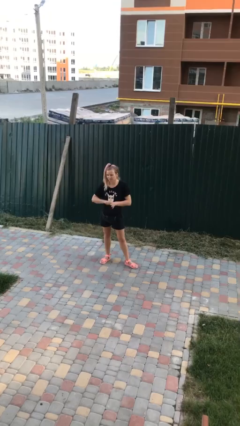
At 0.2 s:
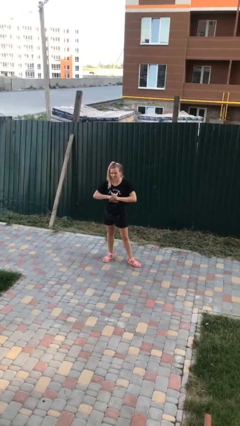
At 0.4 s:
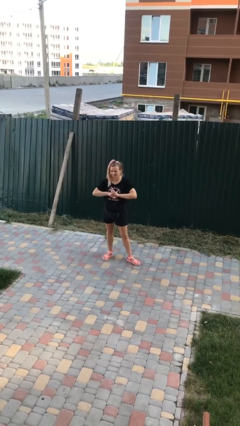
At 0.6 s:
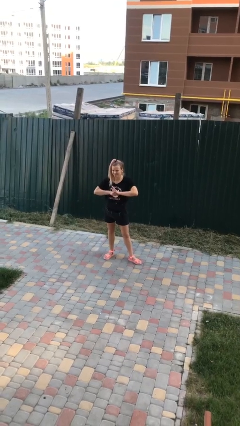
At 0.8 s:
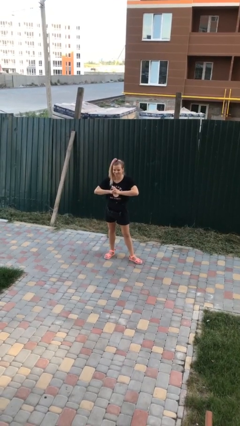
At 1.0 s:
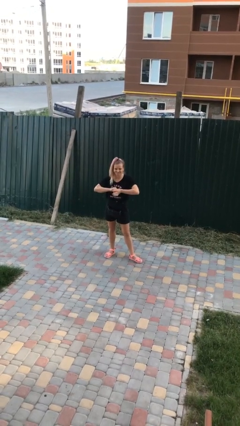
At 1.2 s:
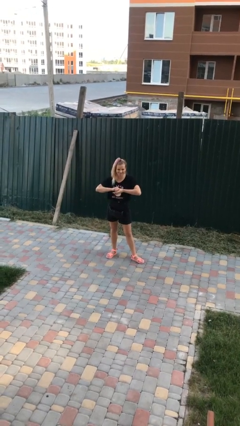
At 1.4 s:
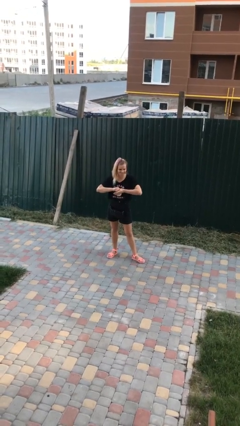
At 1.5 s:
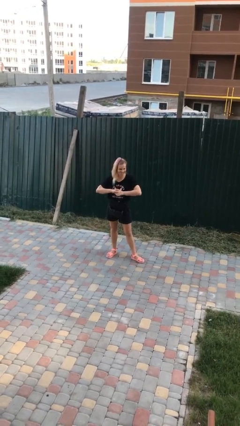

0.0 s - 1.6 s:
person cracks knuckles

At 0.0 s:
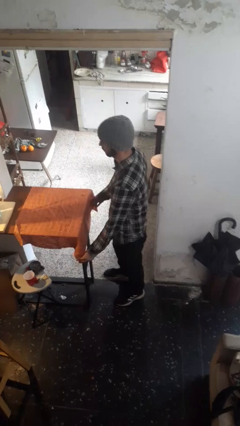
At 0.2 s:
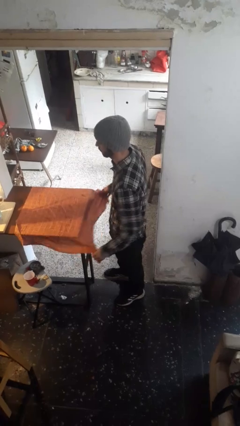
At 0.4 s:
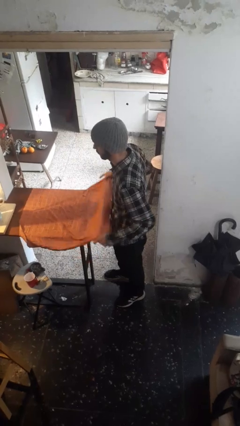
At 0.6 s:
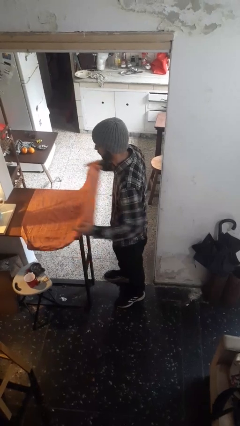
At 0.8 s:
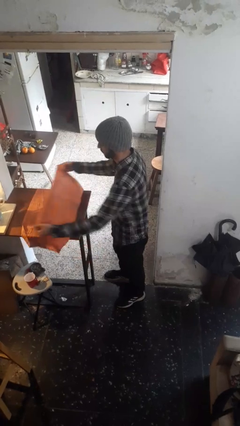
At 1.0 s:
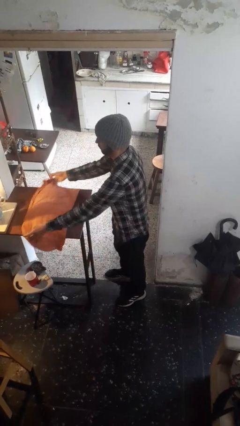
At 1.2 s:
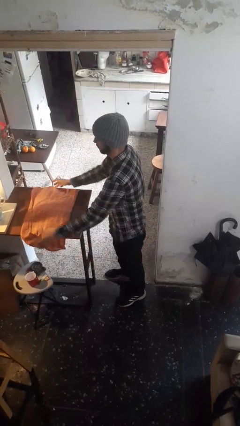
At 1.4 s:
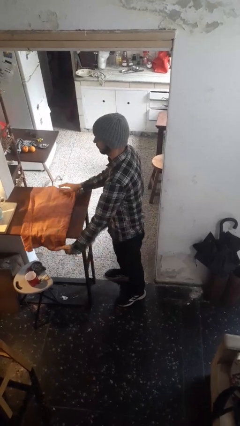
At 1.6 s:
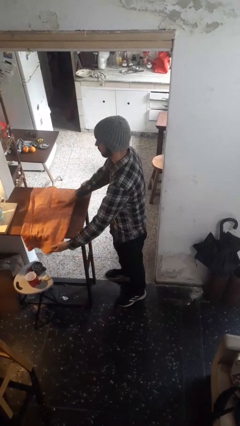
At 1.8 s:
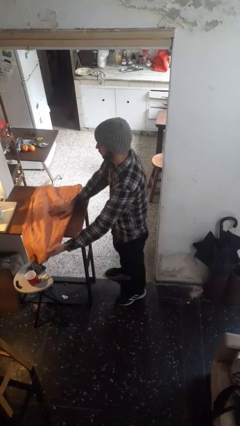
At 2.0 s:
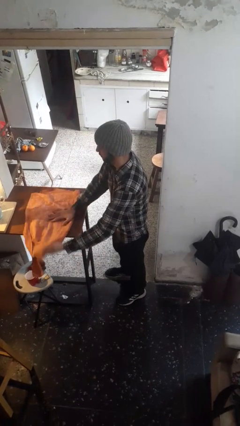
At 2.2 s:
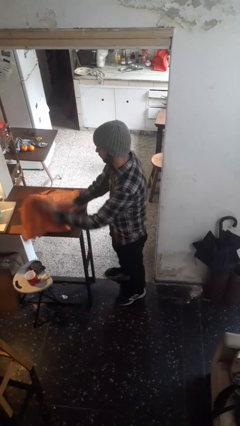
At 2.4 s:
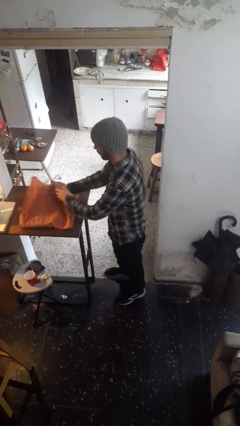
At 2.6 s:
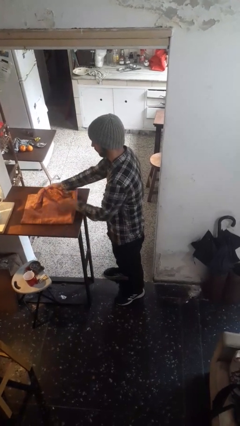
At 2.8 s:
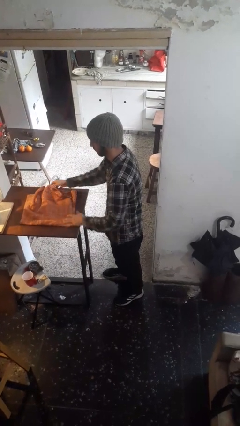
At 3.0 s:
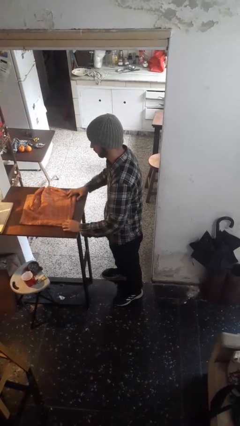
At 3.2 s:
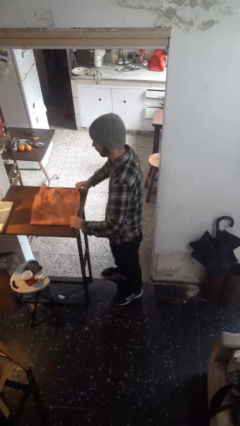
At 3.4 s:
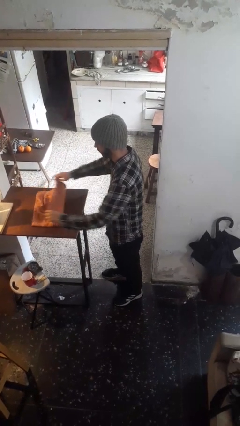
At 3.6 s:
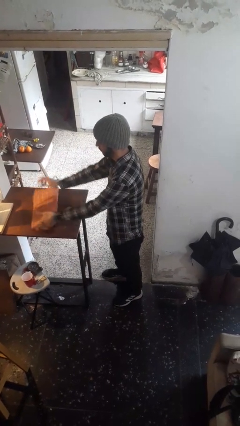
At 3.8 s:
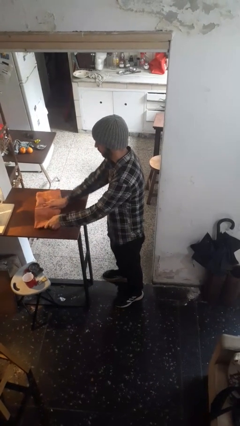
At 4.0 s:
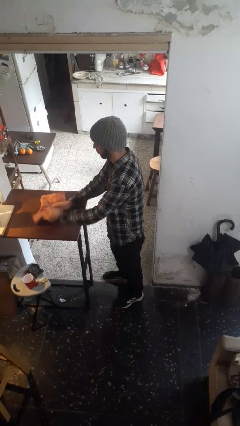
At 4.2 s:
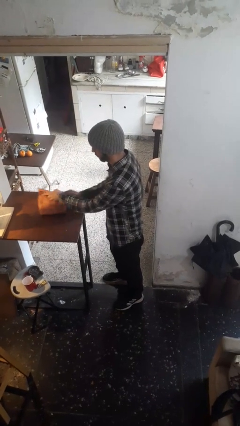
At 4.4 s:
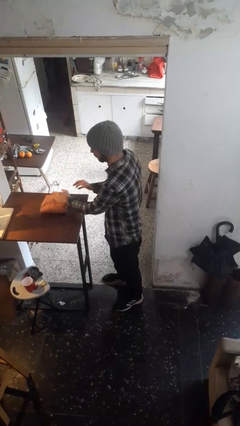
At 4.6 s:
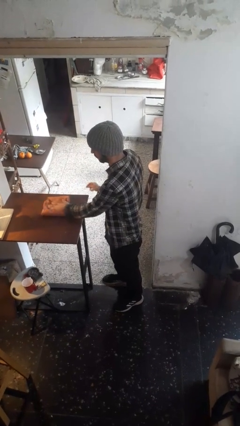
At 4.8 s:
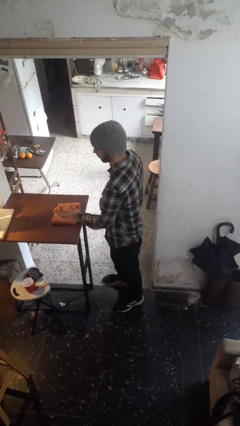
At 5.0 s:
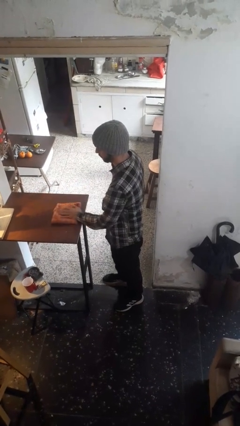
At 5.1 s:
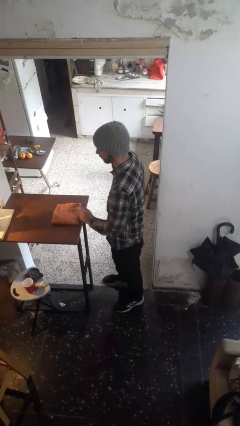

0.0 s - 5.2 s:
person folds tablecloth

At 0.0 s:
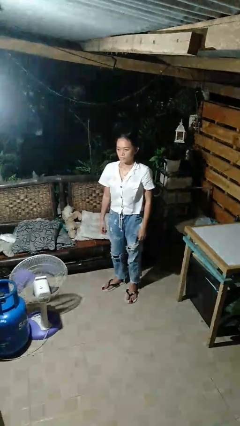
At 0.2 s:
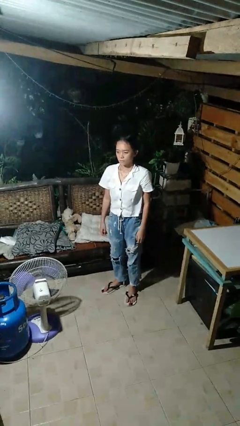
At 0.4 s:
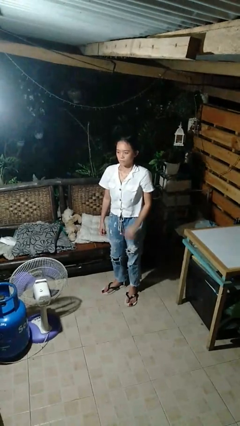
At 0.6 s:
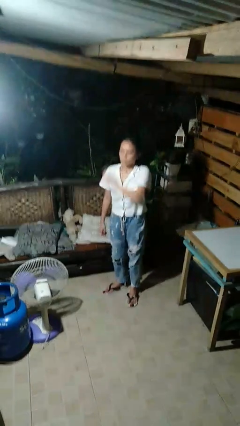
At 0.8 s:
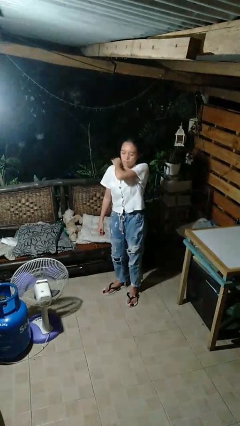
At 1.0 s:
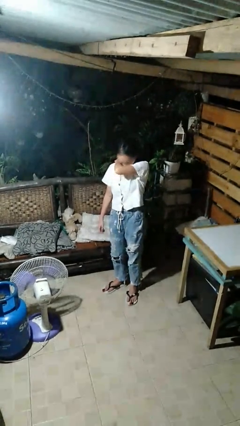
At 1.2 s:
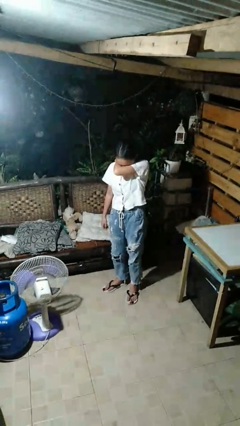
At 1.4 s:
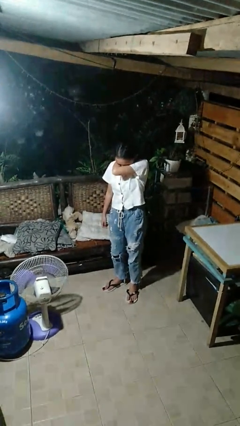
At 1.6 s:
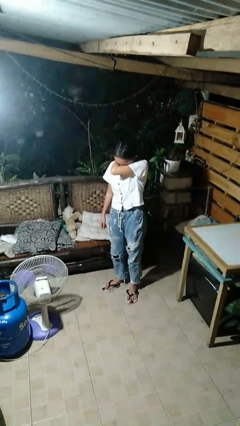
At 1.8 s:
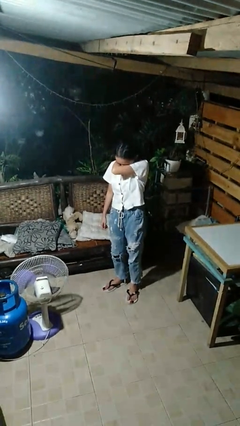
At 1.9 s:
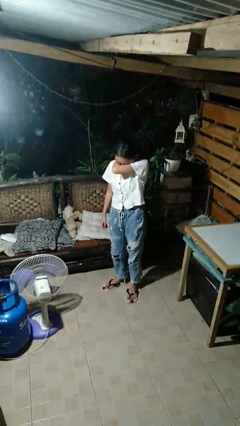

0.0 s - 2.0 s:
person sneezes into arm

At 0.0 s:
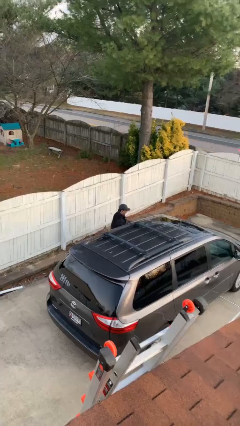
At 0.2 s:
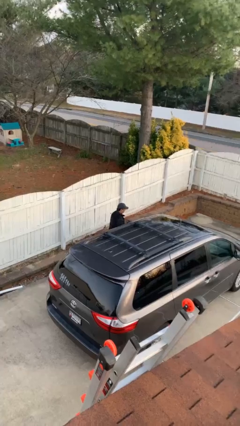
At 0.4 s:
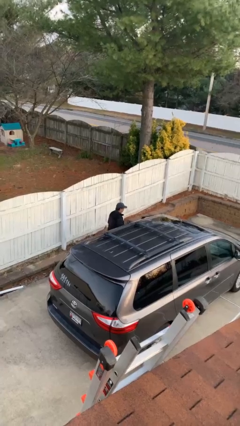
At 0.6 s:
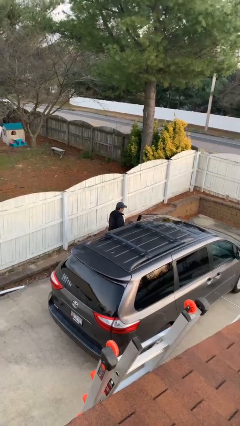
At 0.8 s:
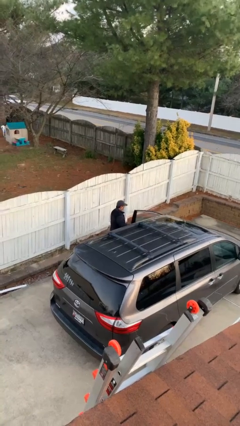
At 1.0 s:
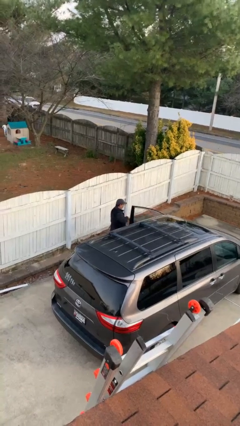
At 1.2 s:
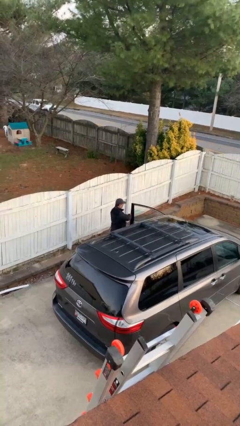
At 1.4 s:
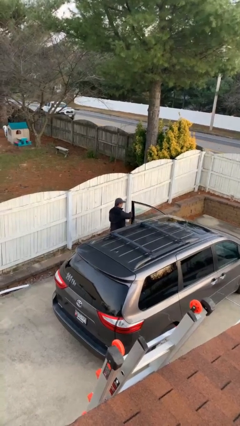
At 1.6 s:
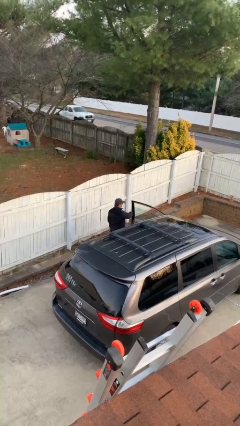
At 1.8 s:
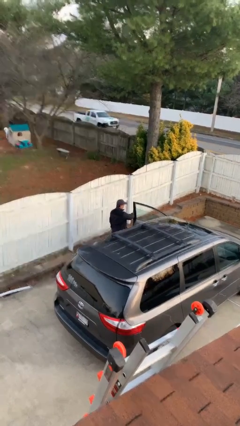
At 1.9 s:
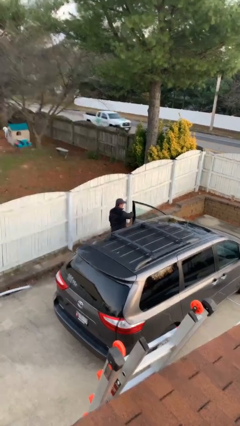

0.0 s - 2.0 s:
person opens car door

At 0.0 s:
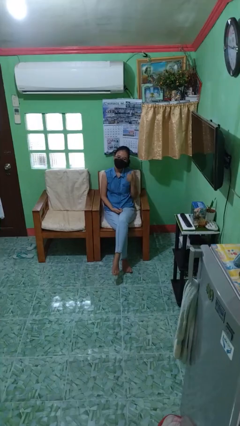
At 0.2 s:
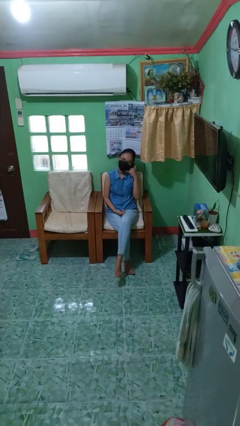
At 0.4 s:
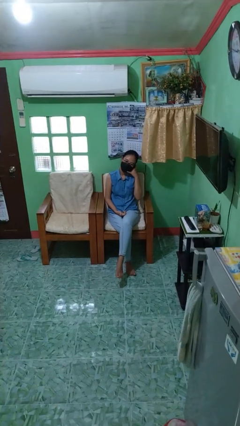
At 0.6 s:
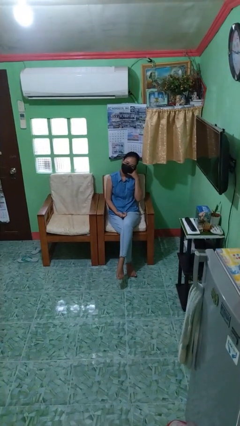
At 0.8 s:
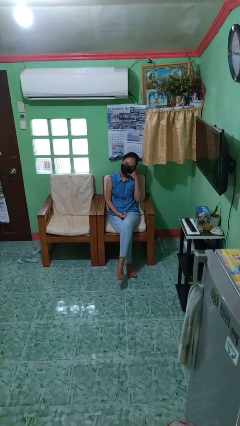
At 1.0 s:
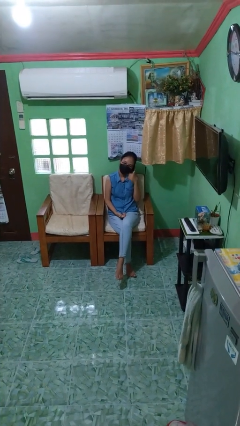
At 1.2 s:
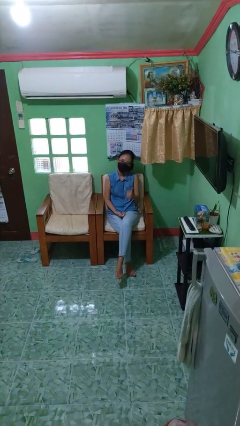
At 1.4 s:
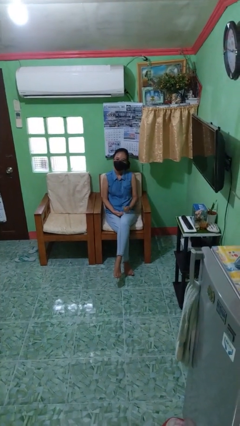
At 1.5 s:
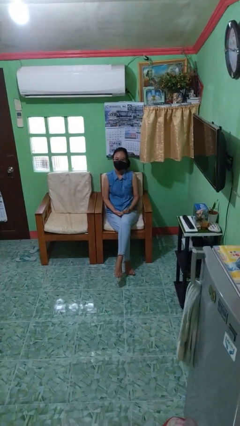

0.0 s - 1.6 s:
person gestures call me

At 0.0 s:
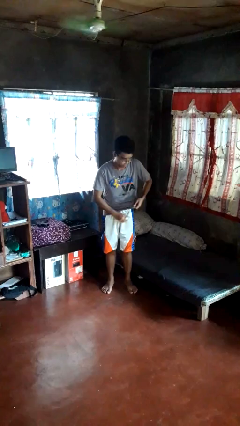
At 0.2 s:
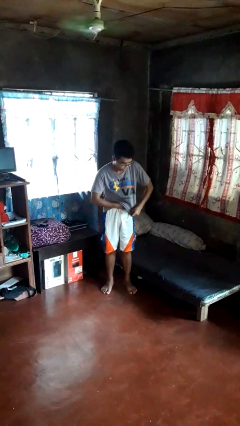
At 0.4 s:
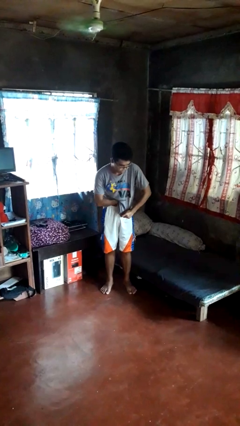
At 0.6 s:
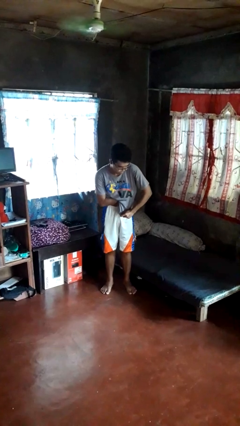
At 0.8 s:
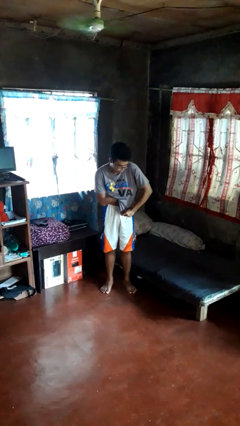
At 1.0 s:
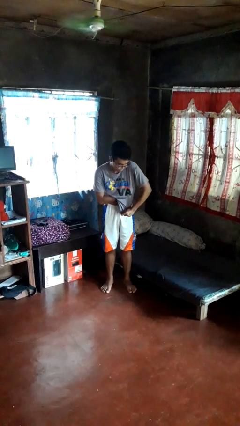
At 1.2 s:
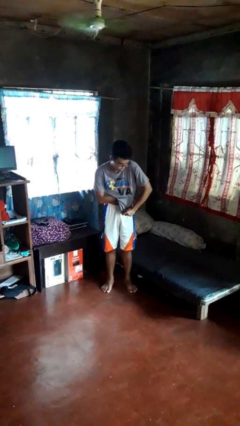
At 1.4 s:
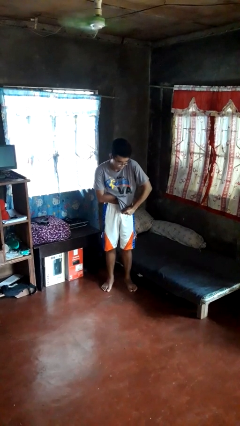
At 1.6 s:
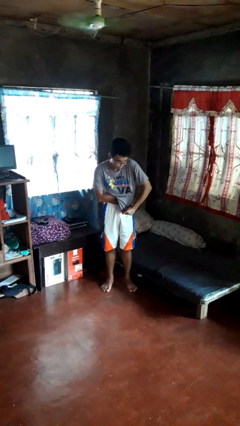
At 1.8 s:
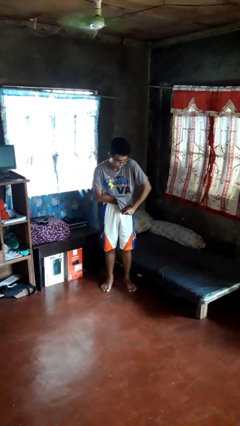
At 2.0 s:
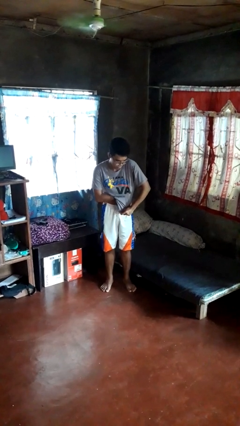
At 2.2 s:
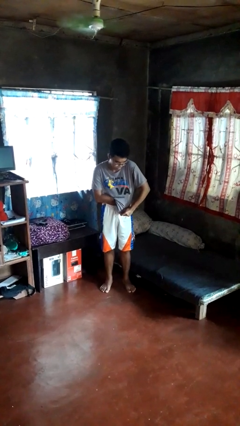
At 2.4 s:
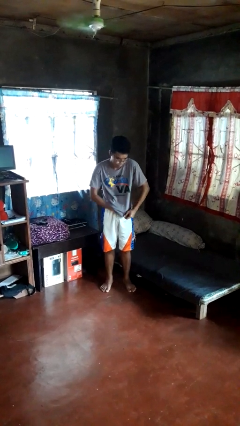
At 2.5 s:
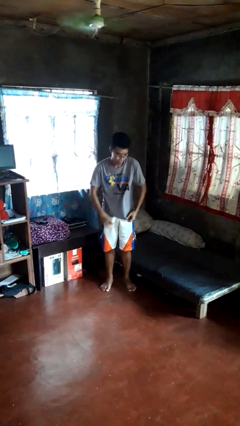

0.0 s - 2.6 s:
person applies deodorant

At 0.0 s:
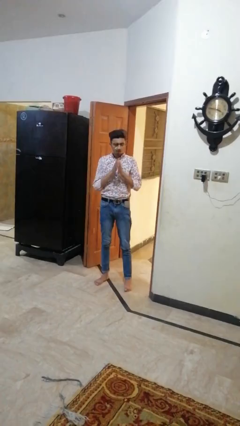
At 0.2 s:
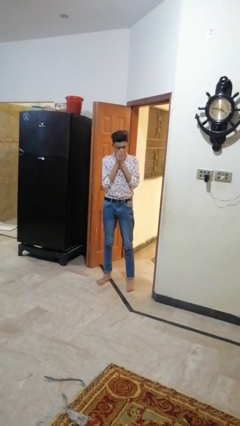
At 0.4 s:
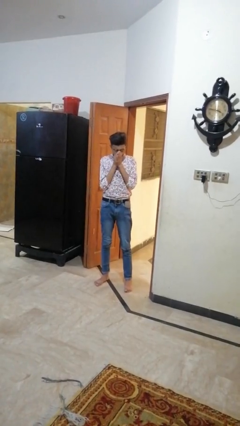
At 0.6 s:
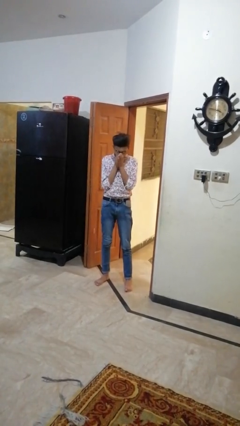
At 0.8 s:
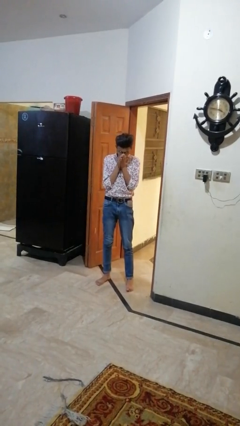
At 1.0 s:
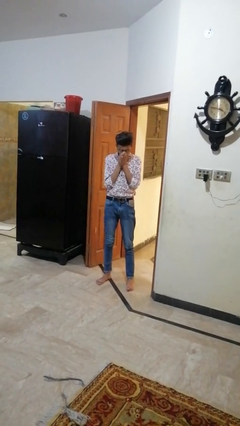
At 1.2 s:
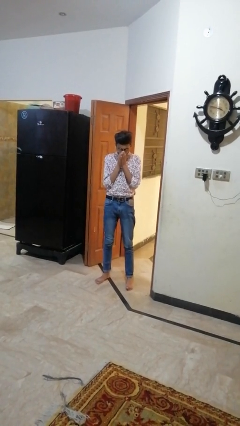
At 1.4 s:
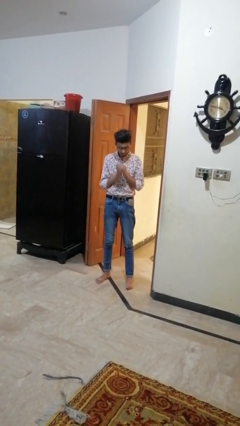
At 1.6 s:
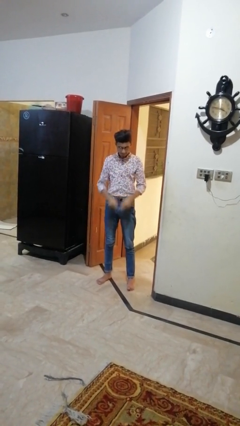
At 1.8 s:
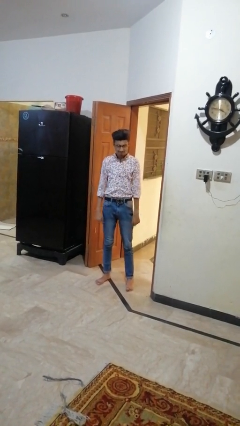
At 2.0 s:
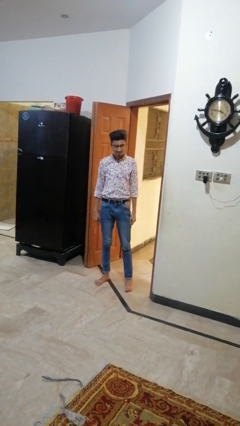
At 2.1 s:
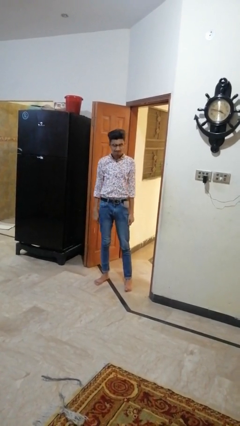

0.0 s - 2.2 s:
person sneezes into hand
